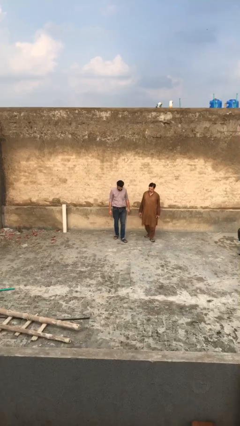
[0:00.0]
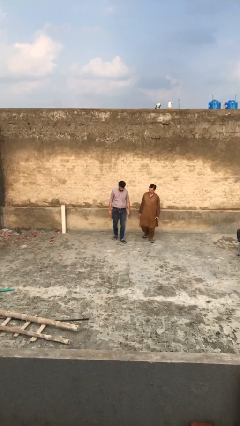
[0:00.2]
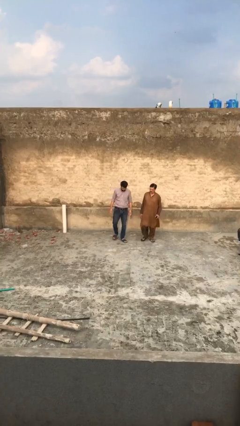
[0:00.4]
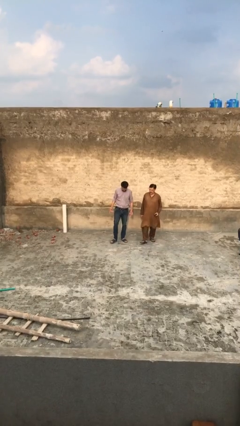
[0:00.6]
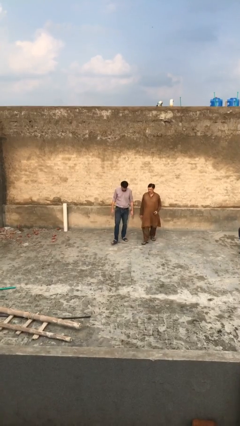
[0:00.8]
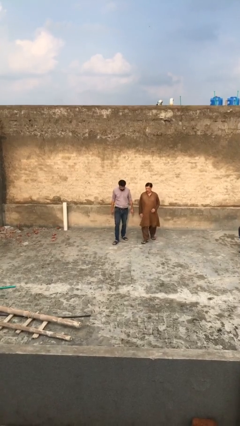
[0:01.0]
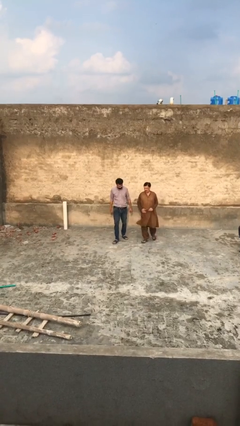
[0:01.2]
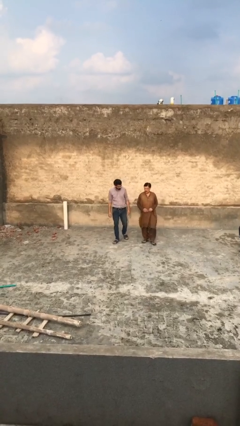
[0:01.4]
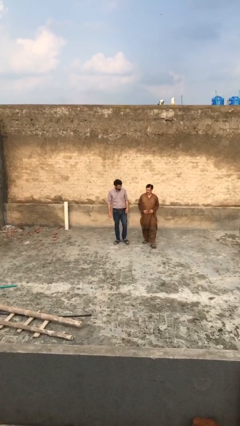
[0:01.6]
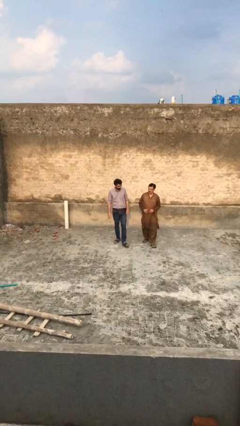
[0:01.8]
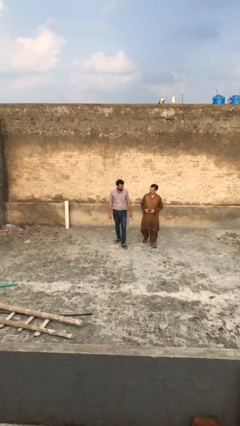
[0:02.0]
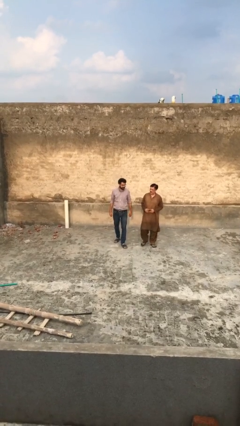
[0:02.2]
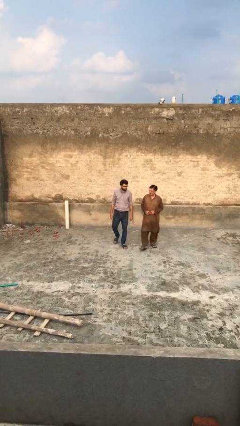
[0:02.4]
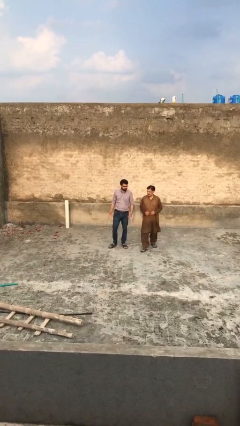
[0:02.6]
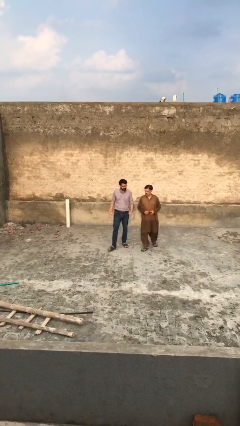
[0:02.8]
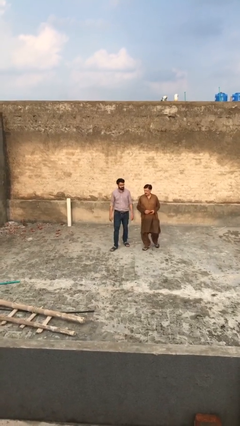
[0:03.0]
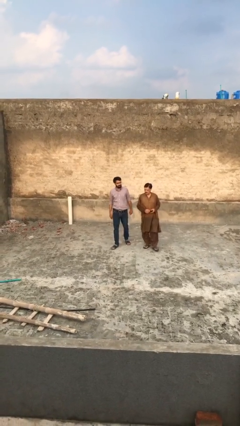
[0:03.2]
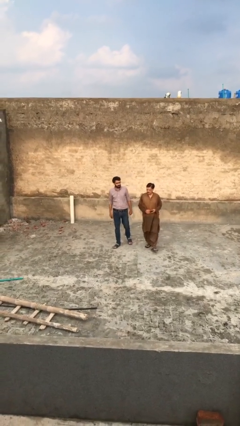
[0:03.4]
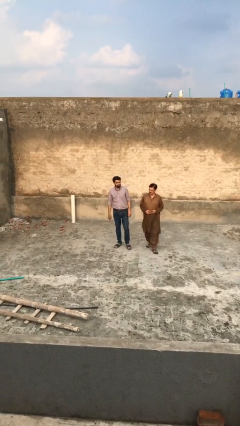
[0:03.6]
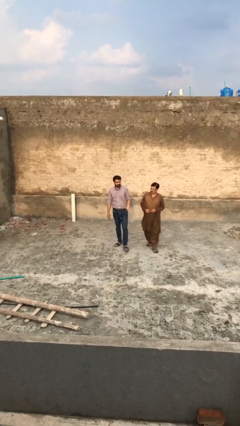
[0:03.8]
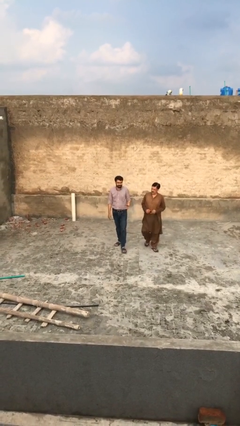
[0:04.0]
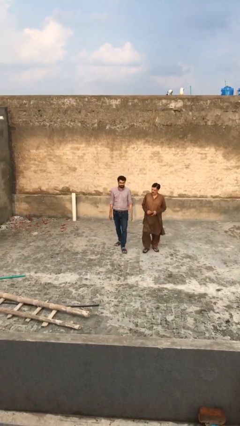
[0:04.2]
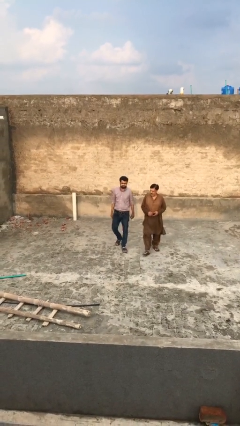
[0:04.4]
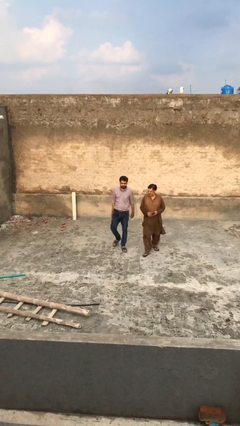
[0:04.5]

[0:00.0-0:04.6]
person talks to person

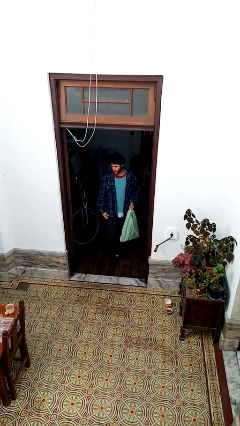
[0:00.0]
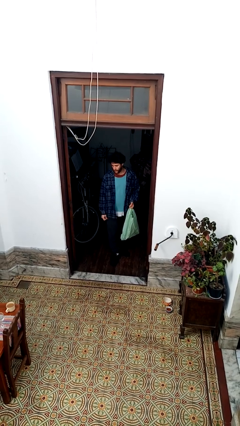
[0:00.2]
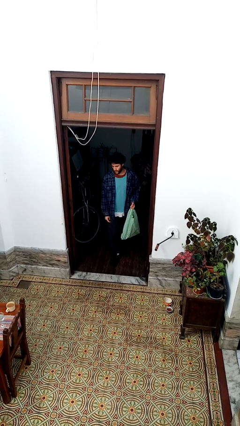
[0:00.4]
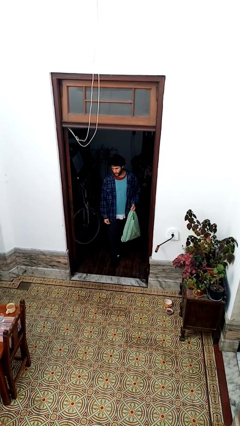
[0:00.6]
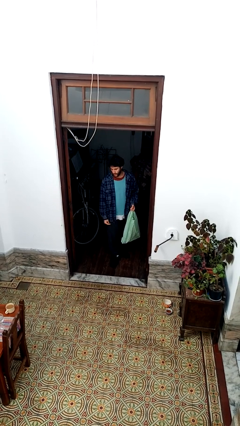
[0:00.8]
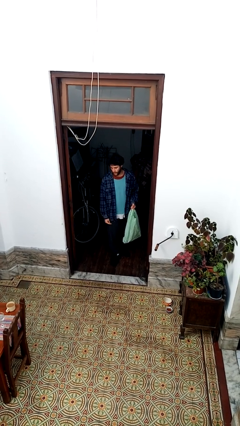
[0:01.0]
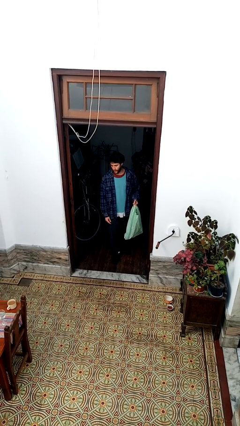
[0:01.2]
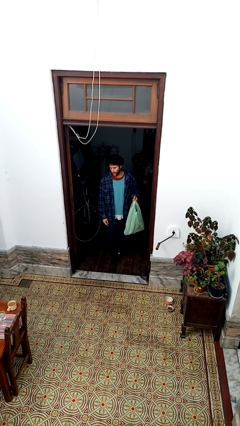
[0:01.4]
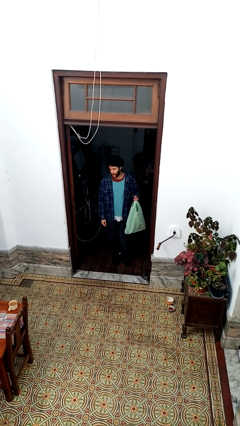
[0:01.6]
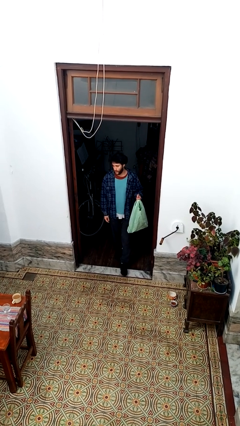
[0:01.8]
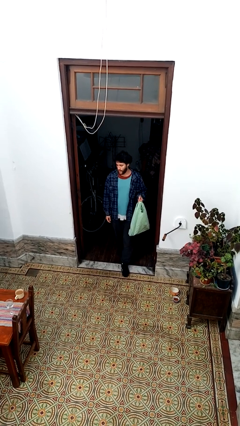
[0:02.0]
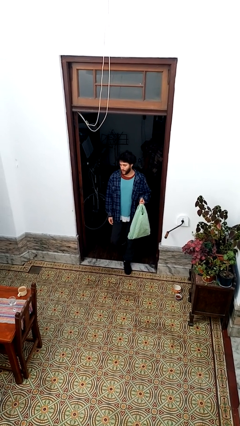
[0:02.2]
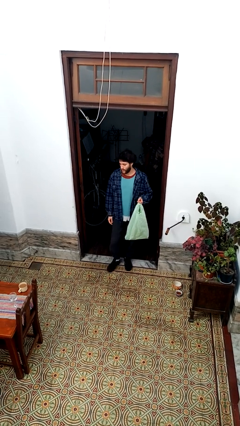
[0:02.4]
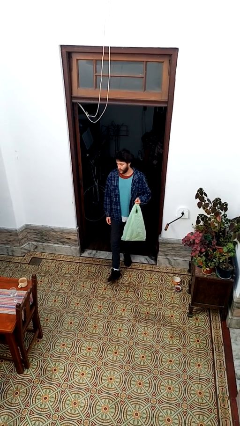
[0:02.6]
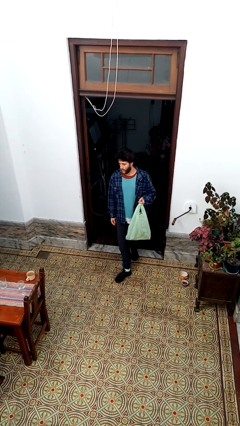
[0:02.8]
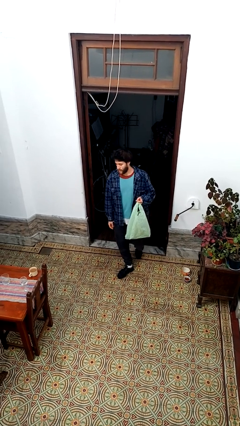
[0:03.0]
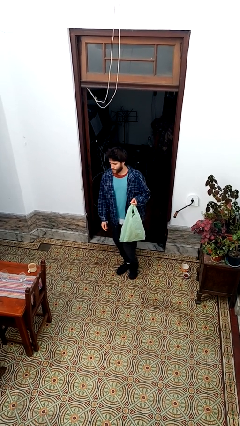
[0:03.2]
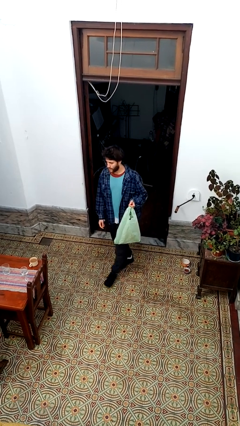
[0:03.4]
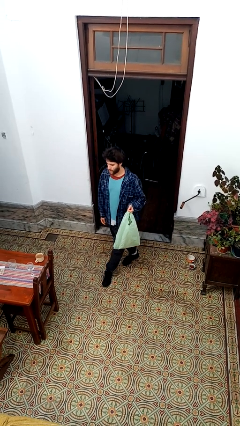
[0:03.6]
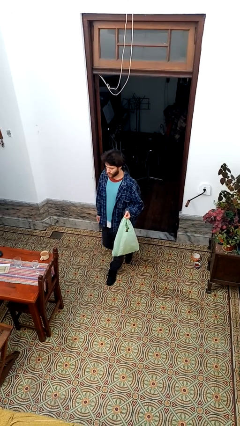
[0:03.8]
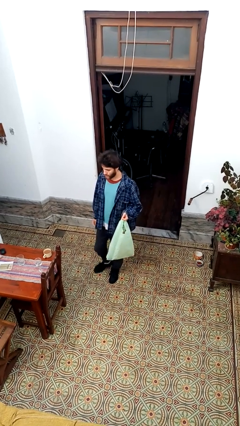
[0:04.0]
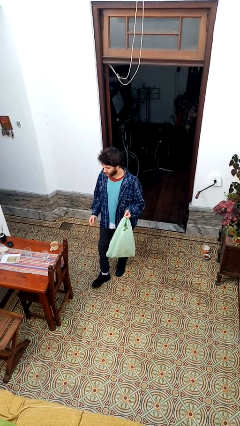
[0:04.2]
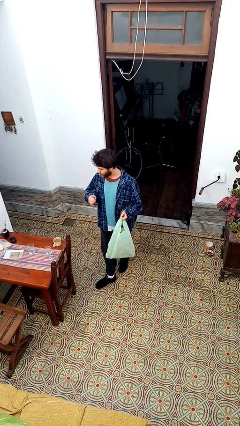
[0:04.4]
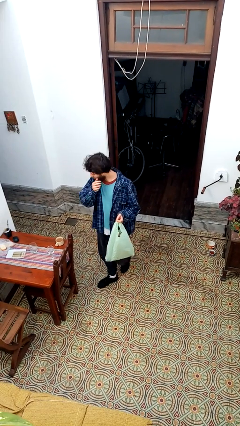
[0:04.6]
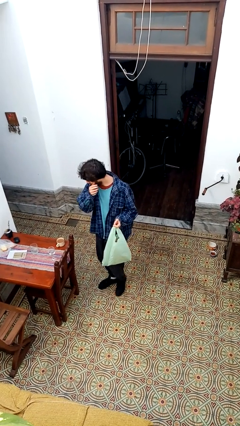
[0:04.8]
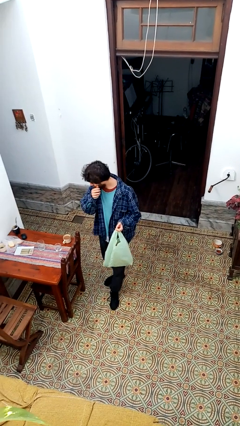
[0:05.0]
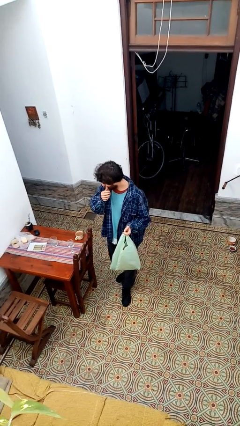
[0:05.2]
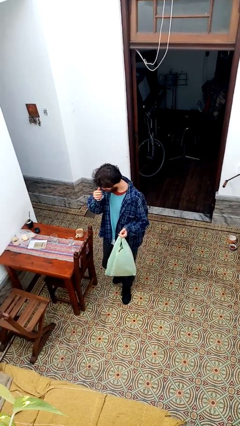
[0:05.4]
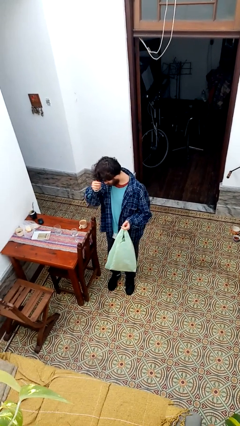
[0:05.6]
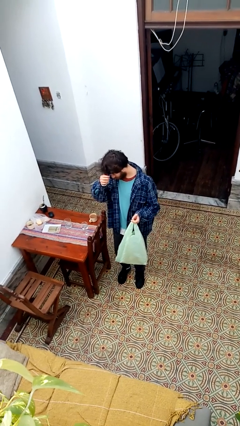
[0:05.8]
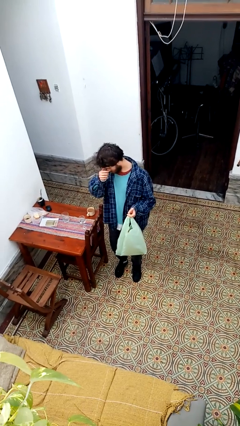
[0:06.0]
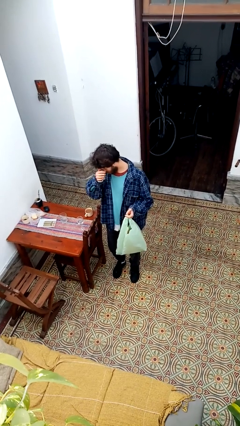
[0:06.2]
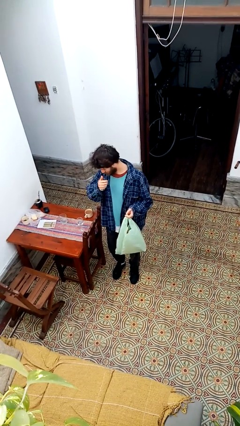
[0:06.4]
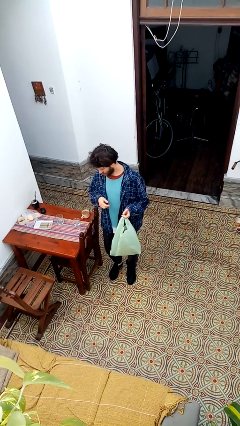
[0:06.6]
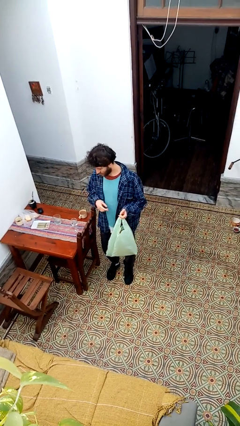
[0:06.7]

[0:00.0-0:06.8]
person carries groceries

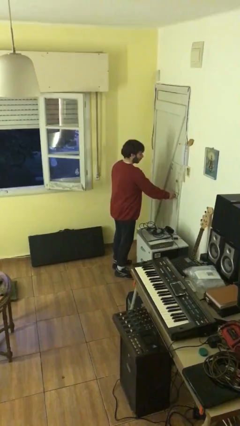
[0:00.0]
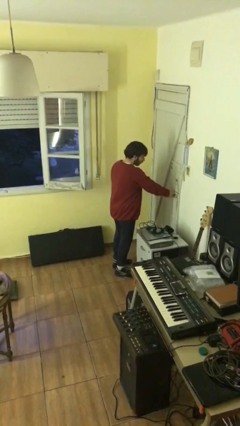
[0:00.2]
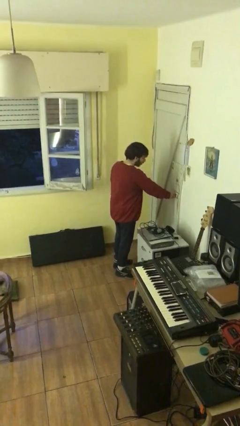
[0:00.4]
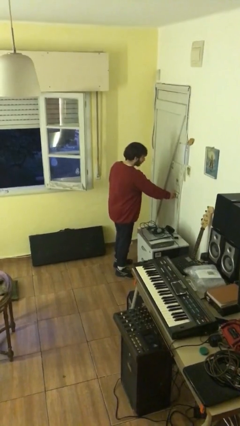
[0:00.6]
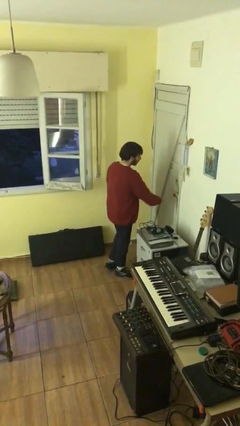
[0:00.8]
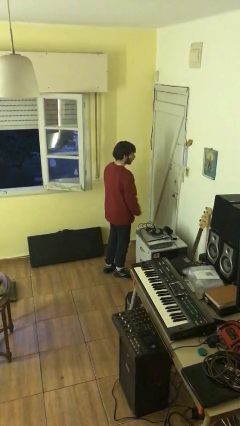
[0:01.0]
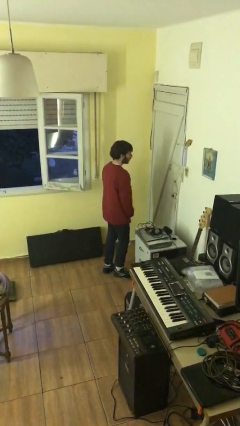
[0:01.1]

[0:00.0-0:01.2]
person locks door with keys

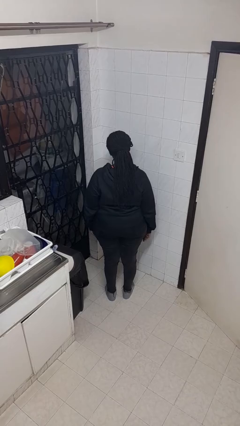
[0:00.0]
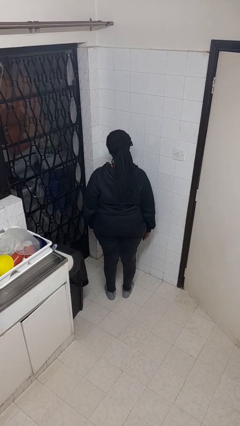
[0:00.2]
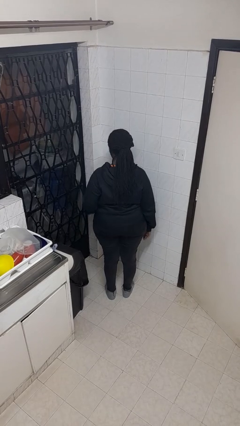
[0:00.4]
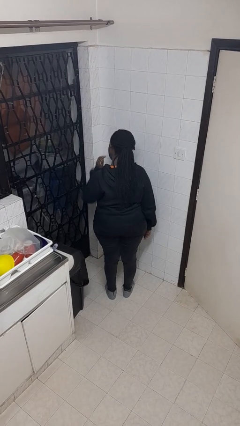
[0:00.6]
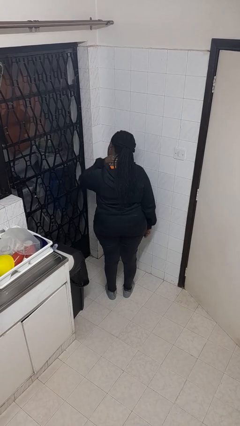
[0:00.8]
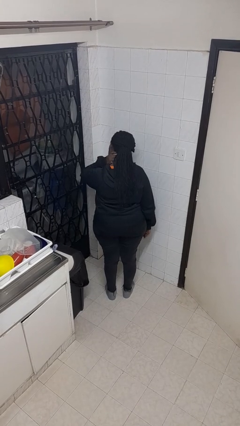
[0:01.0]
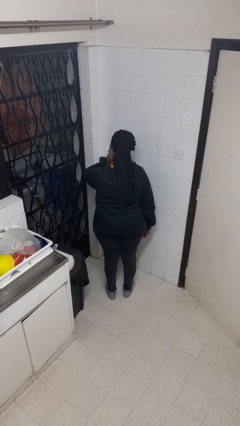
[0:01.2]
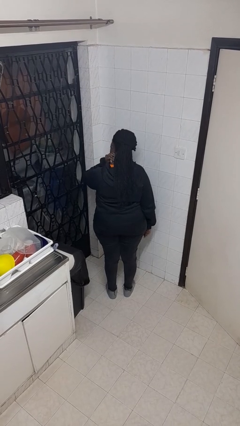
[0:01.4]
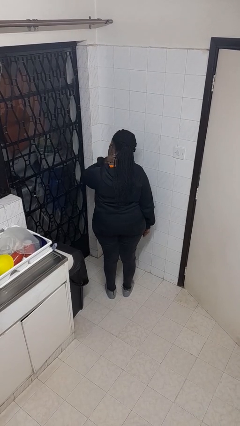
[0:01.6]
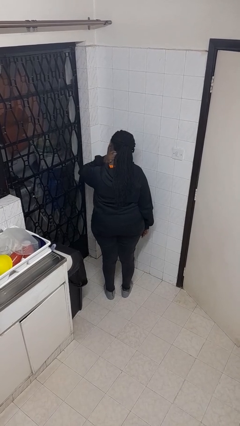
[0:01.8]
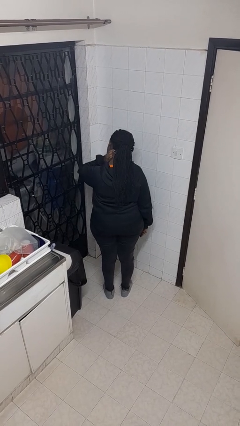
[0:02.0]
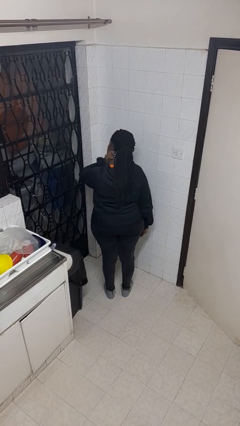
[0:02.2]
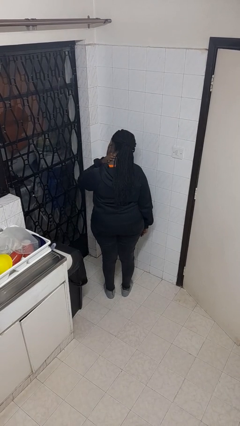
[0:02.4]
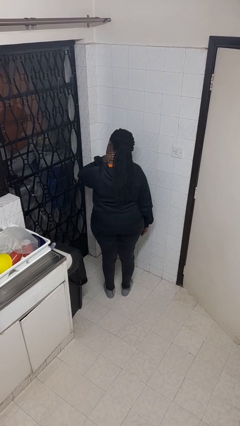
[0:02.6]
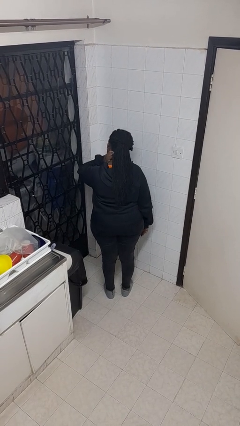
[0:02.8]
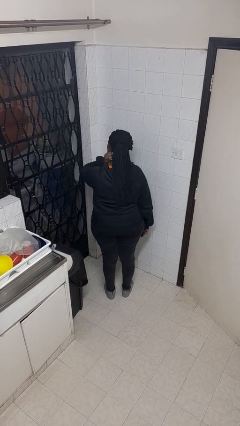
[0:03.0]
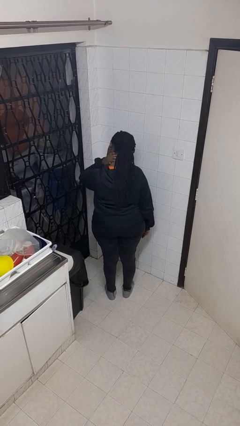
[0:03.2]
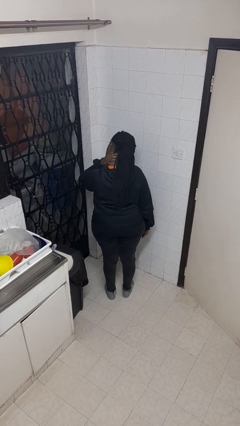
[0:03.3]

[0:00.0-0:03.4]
person rubs neck

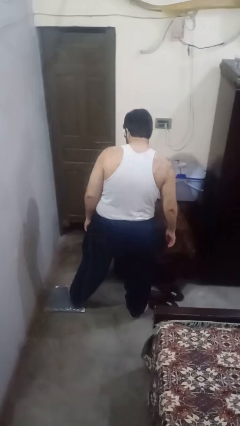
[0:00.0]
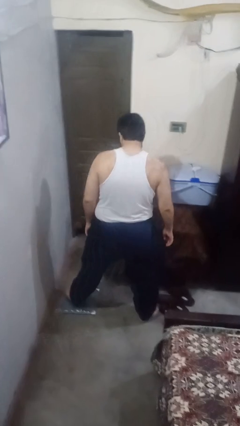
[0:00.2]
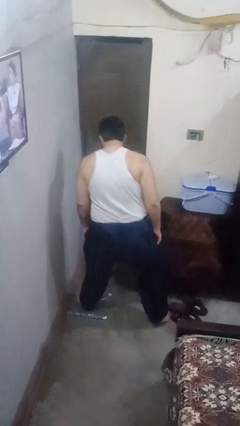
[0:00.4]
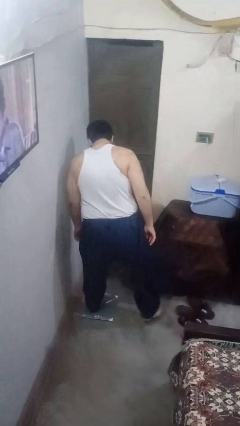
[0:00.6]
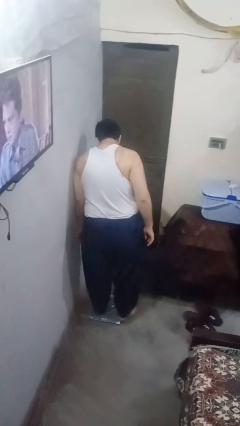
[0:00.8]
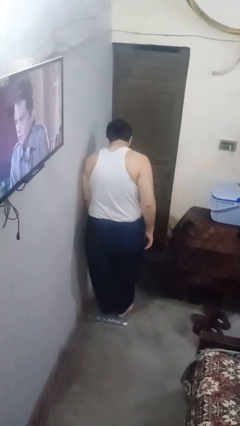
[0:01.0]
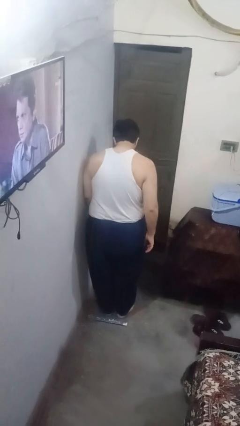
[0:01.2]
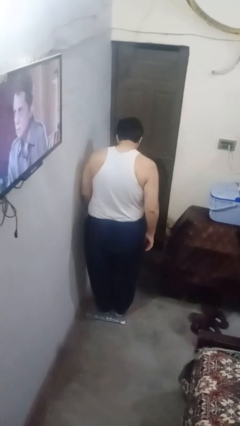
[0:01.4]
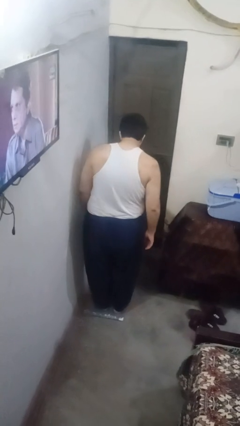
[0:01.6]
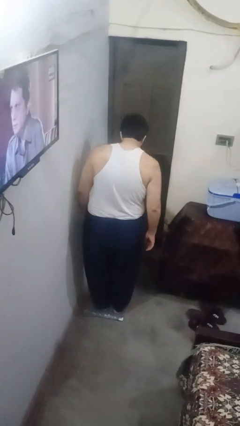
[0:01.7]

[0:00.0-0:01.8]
person uses bodyweight scale
